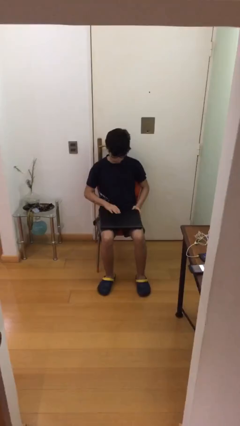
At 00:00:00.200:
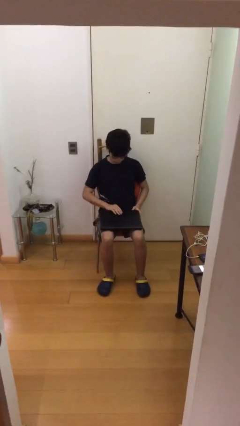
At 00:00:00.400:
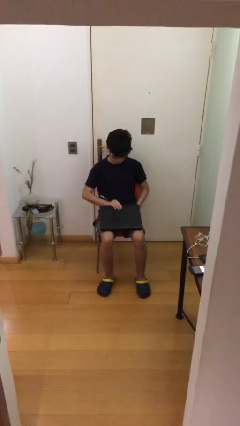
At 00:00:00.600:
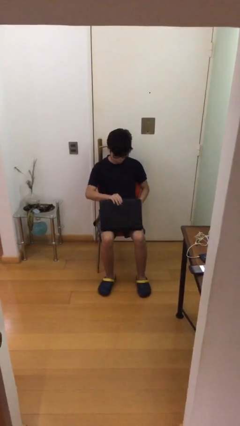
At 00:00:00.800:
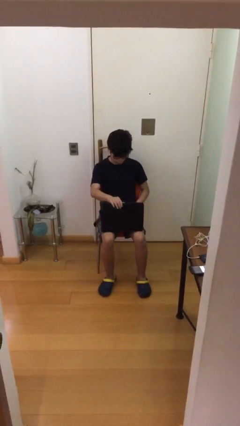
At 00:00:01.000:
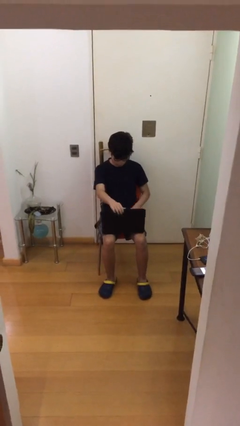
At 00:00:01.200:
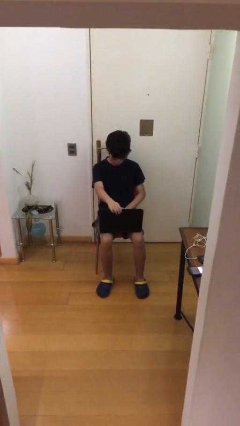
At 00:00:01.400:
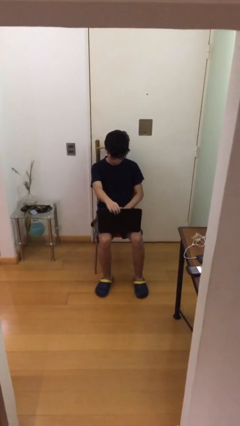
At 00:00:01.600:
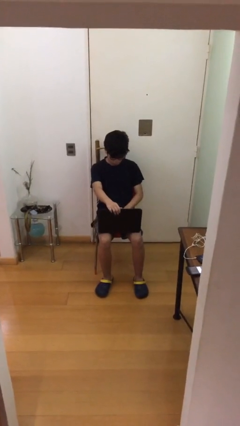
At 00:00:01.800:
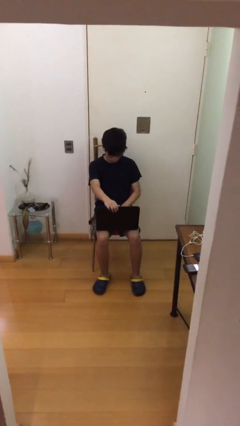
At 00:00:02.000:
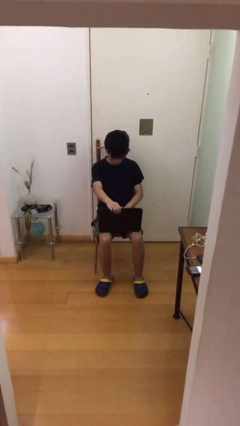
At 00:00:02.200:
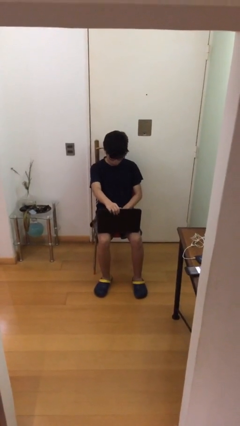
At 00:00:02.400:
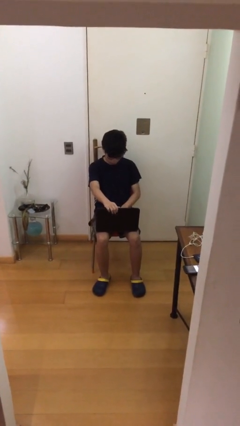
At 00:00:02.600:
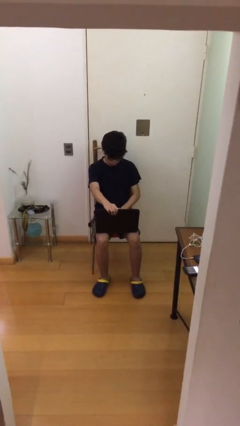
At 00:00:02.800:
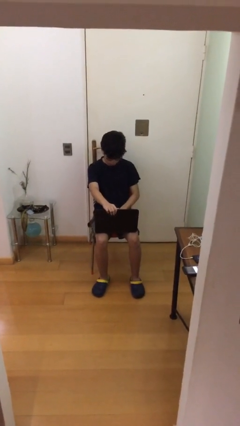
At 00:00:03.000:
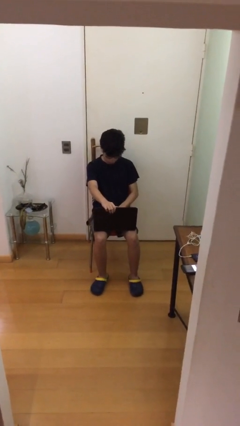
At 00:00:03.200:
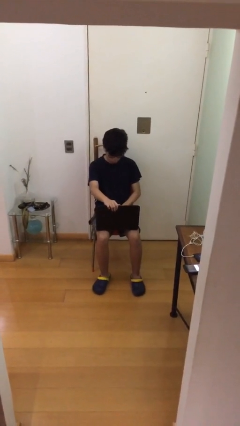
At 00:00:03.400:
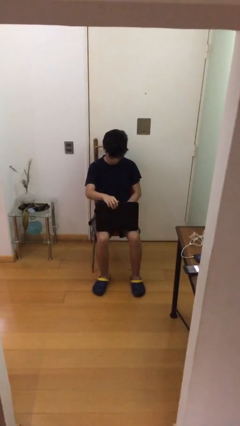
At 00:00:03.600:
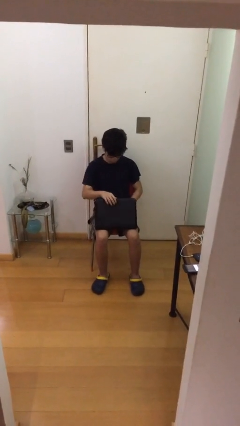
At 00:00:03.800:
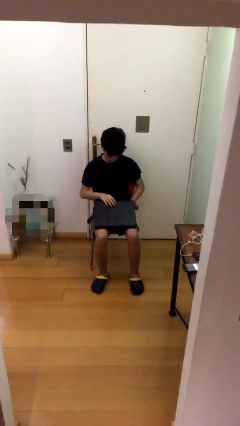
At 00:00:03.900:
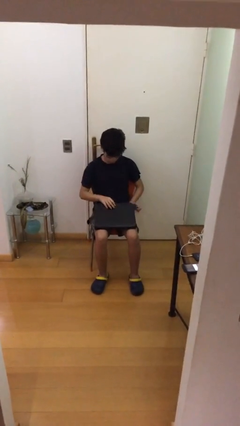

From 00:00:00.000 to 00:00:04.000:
person interacts with laptop

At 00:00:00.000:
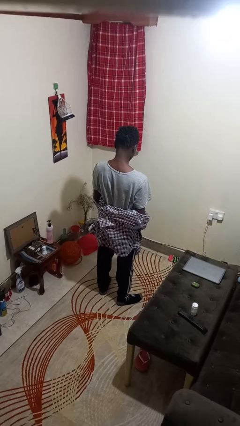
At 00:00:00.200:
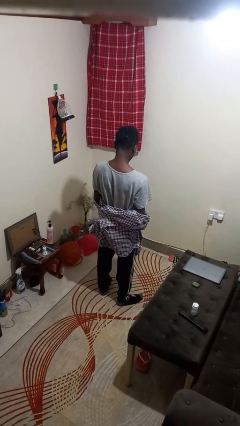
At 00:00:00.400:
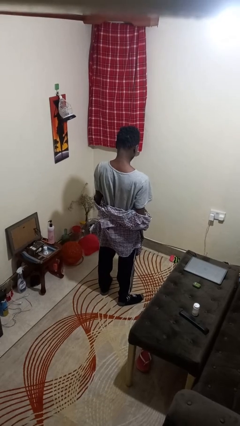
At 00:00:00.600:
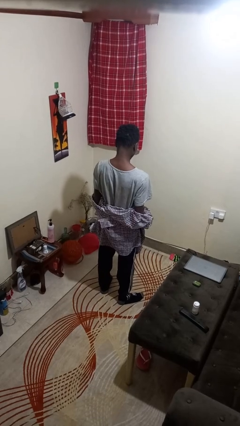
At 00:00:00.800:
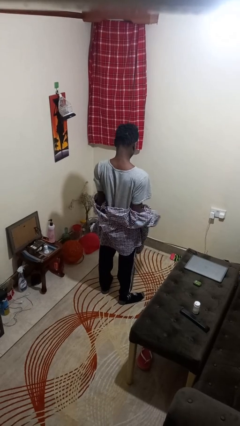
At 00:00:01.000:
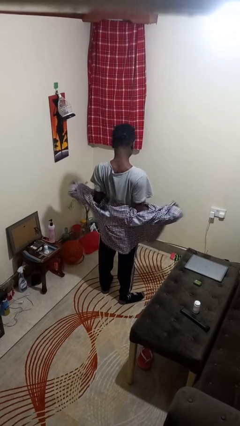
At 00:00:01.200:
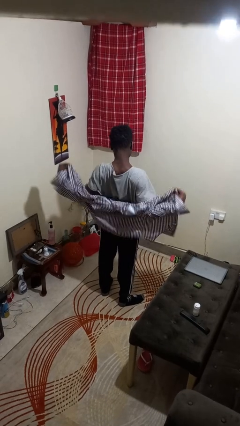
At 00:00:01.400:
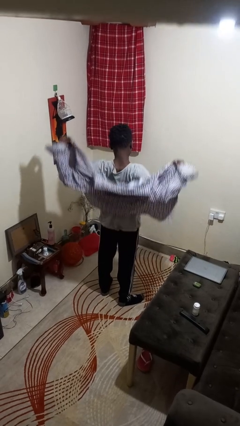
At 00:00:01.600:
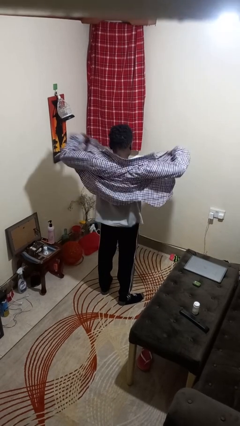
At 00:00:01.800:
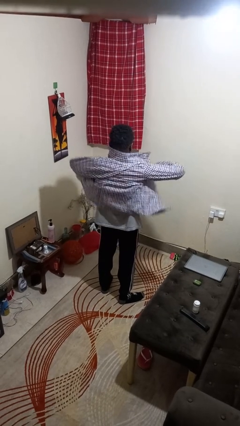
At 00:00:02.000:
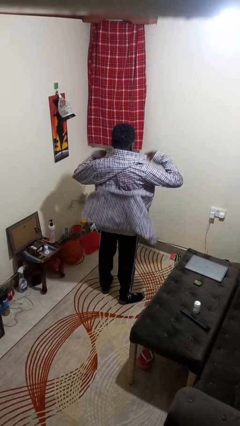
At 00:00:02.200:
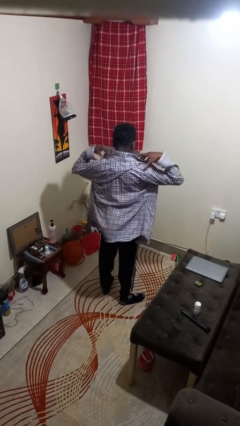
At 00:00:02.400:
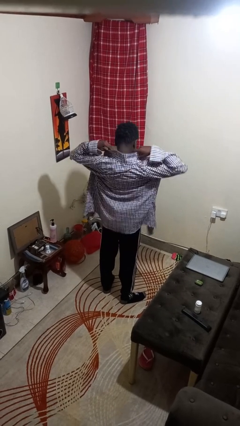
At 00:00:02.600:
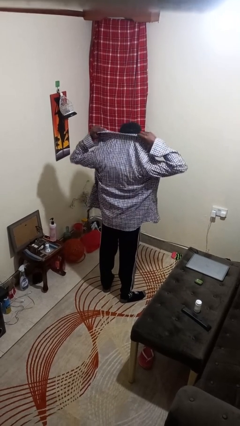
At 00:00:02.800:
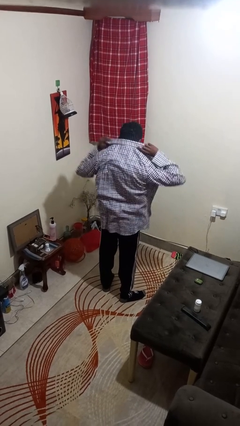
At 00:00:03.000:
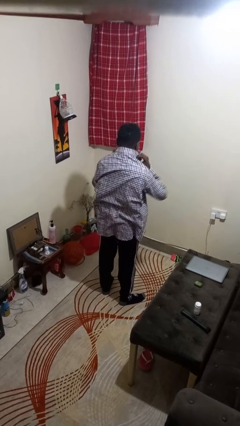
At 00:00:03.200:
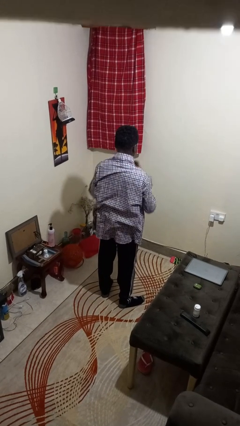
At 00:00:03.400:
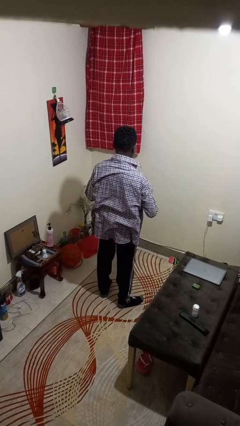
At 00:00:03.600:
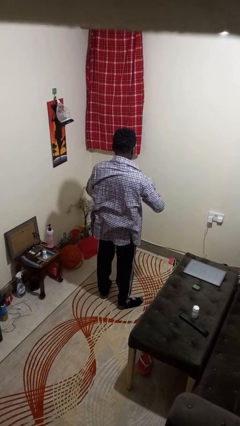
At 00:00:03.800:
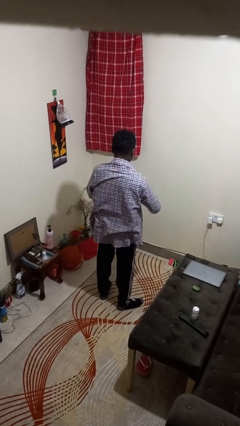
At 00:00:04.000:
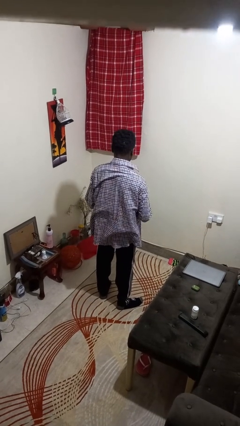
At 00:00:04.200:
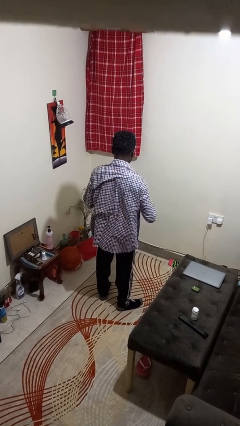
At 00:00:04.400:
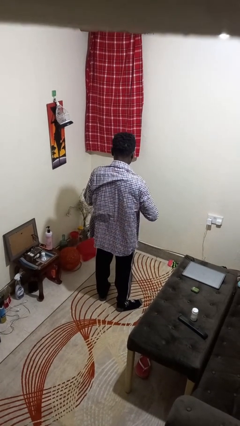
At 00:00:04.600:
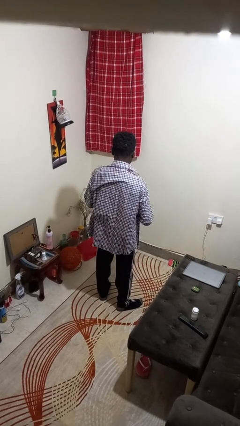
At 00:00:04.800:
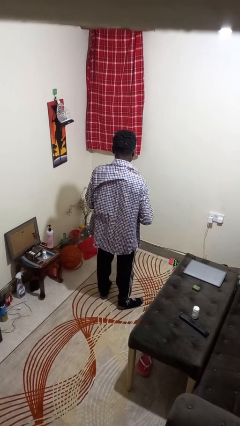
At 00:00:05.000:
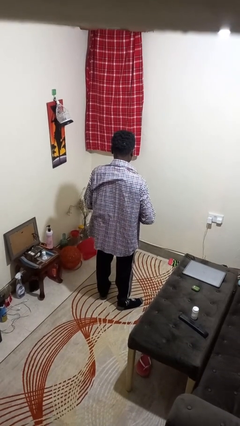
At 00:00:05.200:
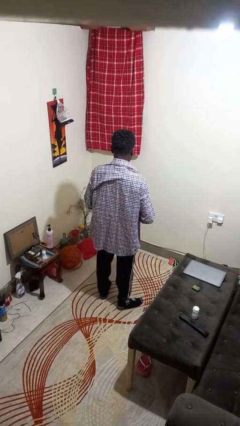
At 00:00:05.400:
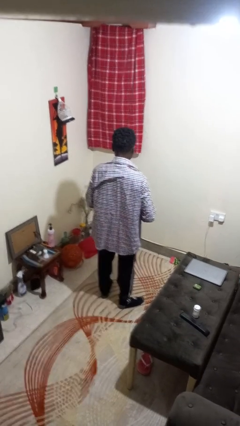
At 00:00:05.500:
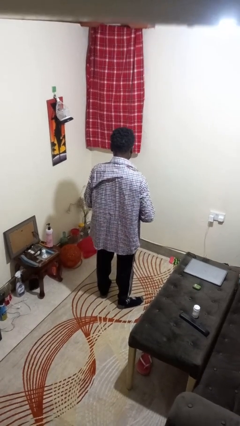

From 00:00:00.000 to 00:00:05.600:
person puts on shirt

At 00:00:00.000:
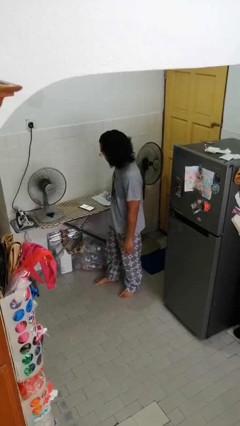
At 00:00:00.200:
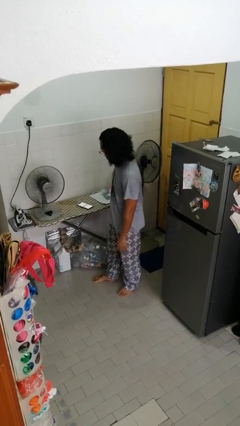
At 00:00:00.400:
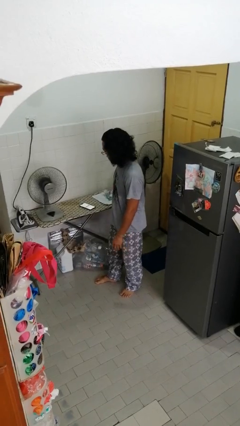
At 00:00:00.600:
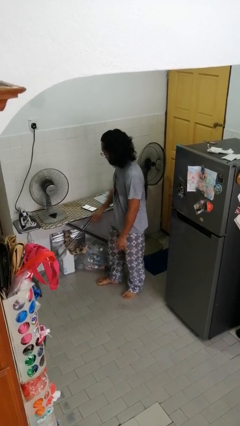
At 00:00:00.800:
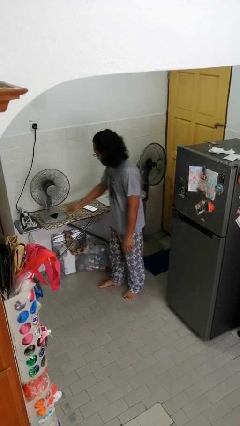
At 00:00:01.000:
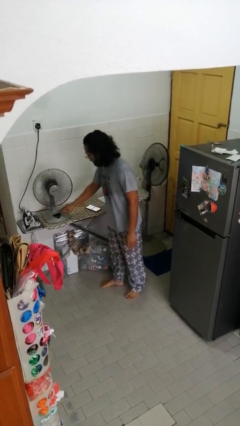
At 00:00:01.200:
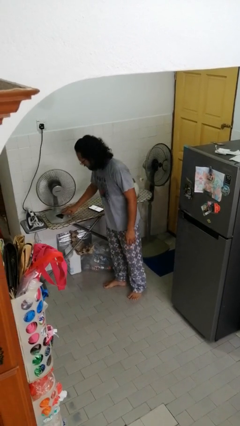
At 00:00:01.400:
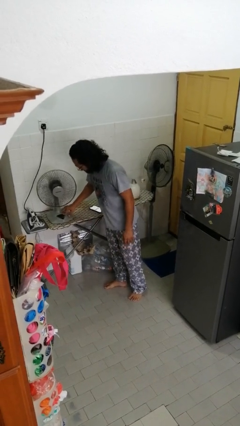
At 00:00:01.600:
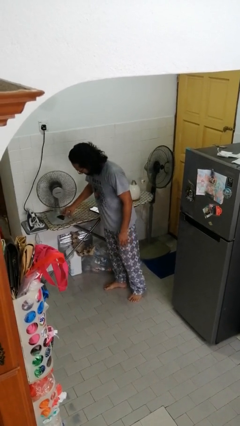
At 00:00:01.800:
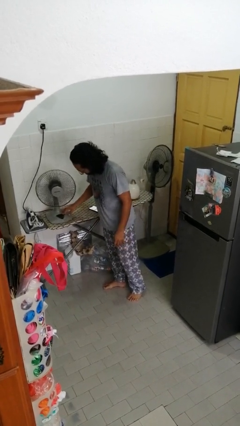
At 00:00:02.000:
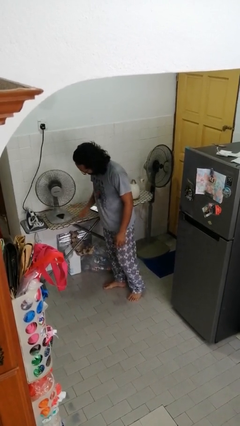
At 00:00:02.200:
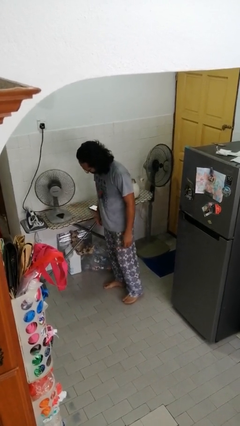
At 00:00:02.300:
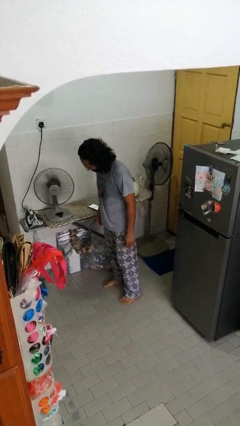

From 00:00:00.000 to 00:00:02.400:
person turns on fan

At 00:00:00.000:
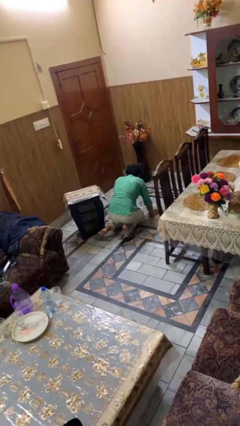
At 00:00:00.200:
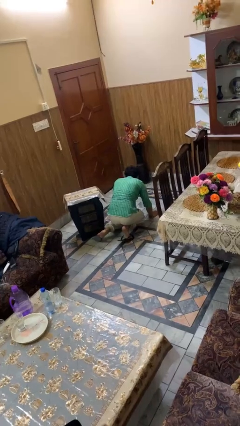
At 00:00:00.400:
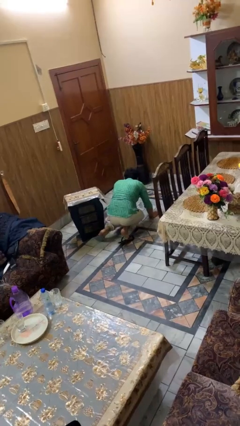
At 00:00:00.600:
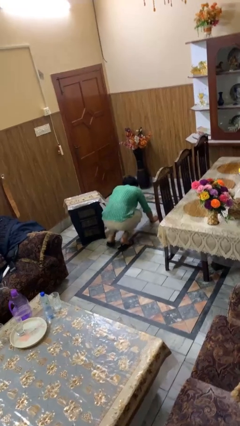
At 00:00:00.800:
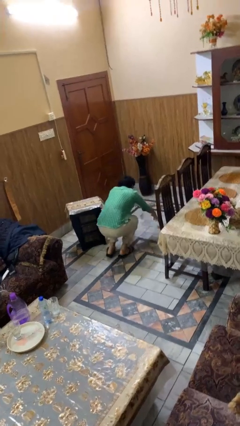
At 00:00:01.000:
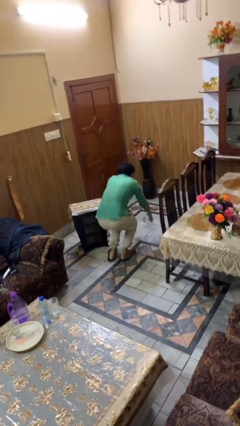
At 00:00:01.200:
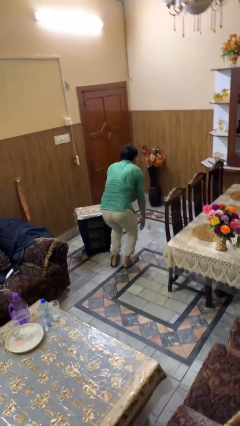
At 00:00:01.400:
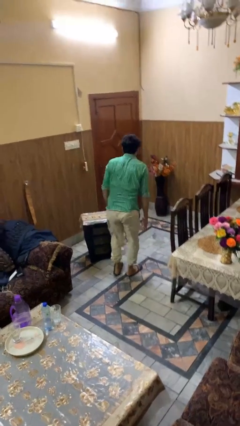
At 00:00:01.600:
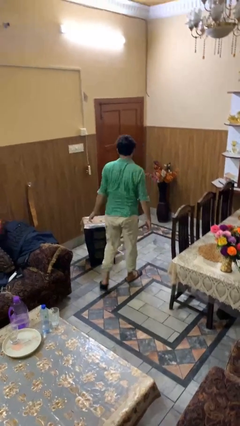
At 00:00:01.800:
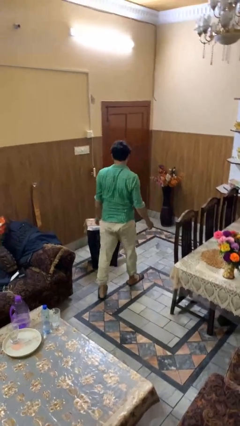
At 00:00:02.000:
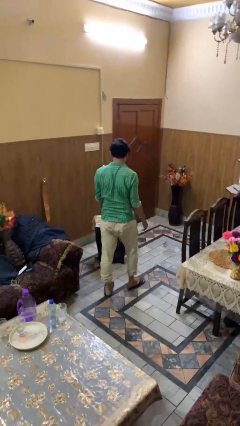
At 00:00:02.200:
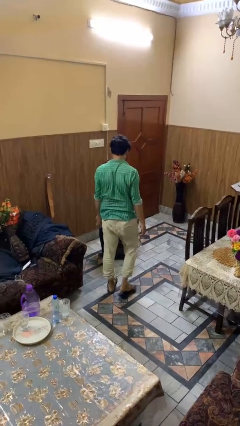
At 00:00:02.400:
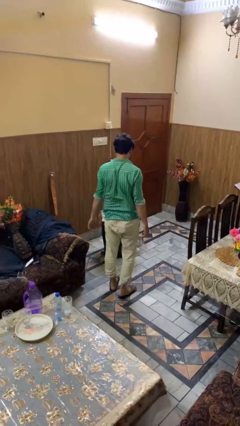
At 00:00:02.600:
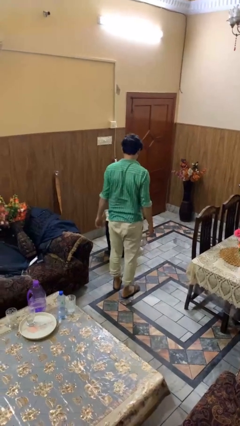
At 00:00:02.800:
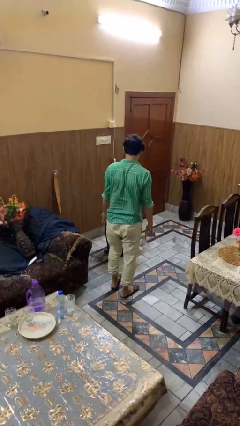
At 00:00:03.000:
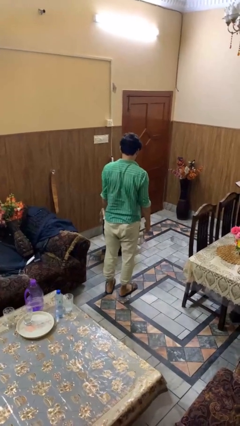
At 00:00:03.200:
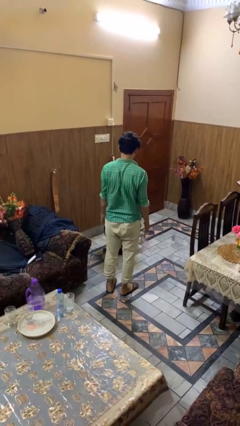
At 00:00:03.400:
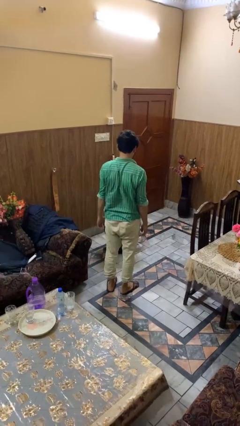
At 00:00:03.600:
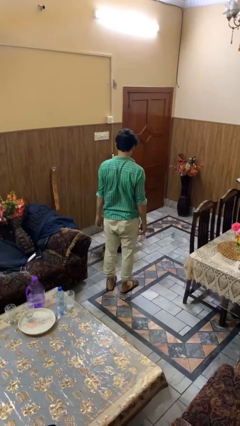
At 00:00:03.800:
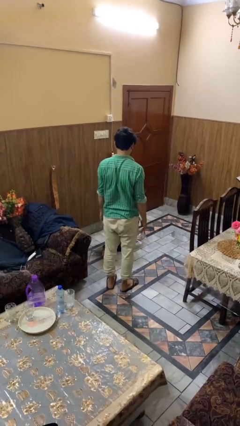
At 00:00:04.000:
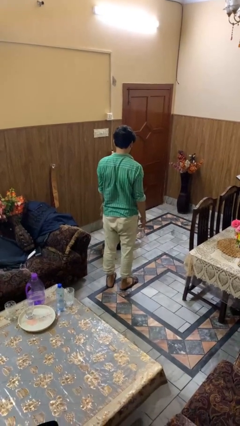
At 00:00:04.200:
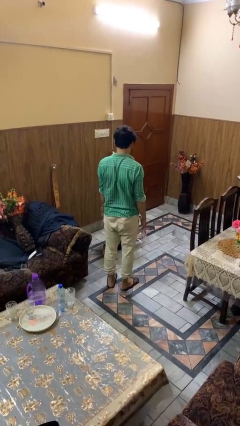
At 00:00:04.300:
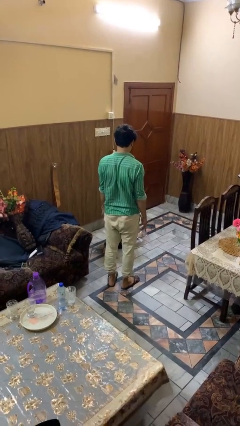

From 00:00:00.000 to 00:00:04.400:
person stands up from floor

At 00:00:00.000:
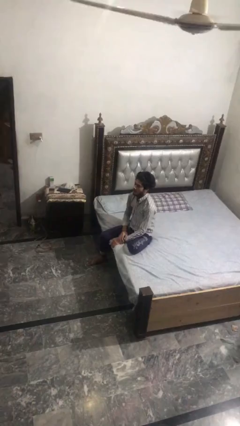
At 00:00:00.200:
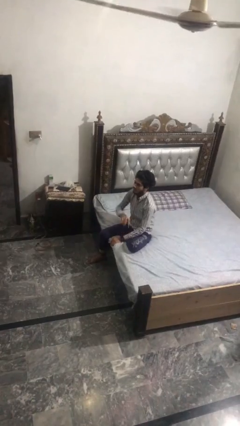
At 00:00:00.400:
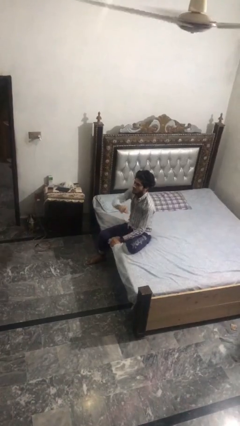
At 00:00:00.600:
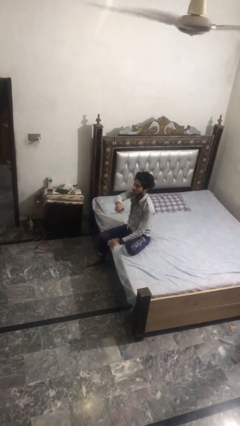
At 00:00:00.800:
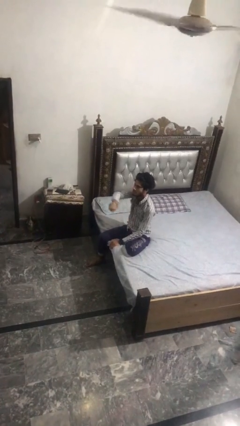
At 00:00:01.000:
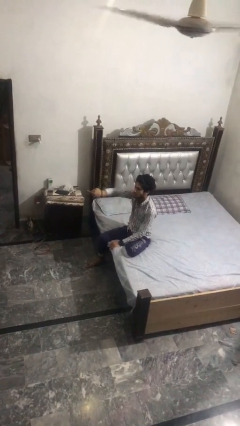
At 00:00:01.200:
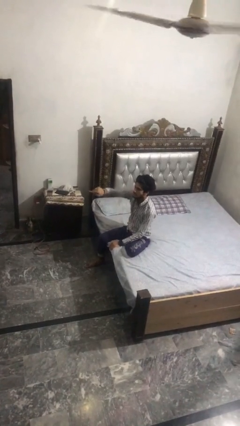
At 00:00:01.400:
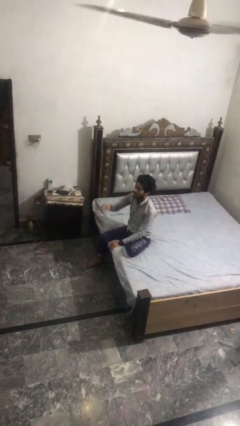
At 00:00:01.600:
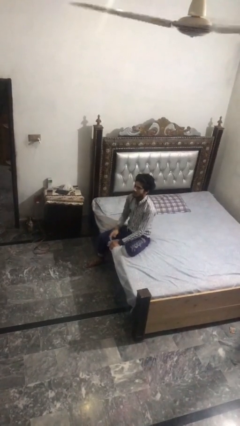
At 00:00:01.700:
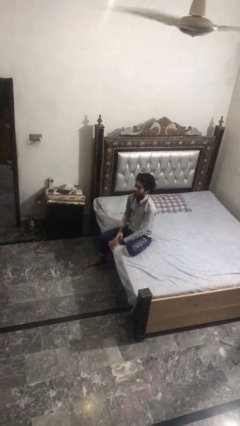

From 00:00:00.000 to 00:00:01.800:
person gestures swipe right
